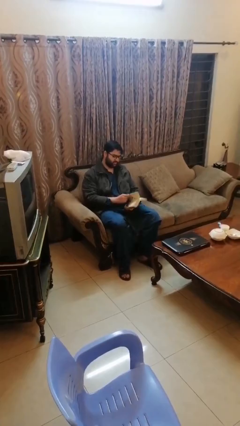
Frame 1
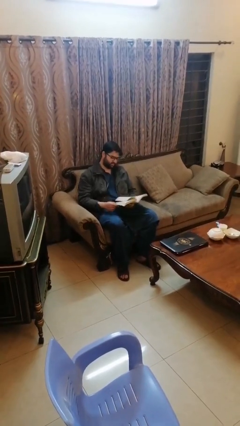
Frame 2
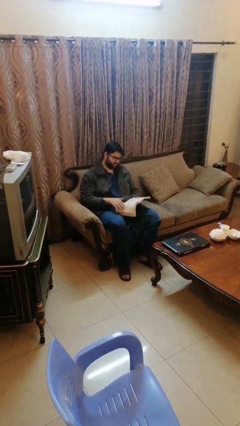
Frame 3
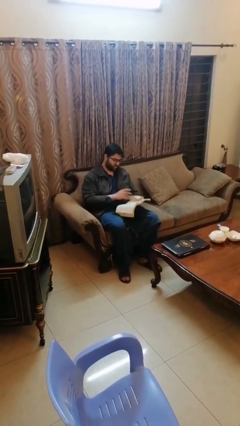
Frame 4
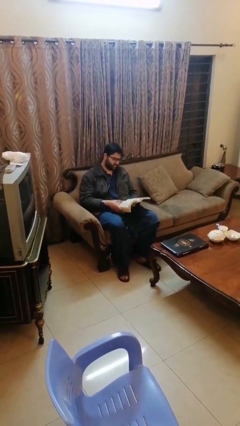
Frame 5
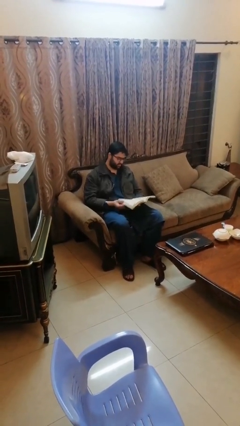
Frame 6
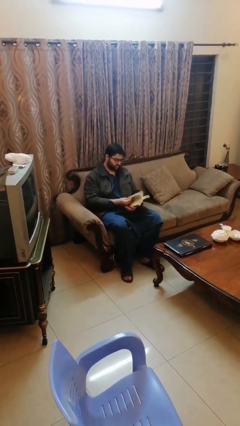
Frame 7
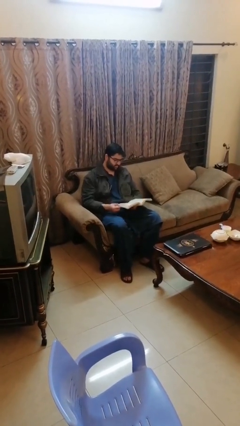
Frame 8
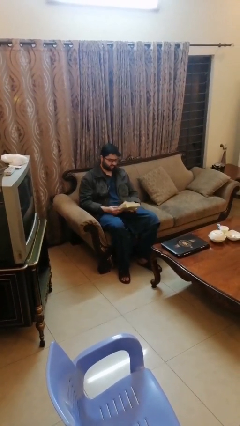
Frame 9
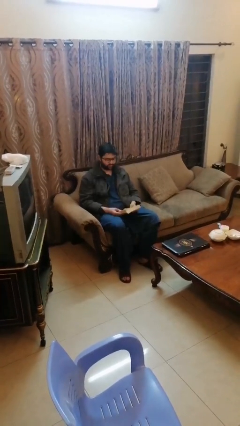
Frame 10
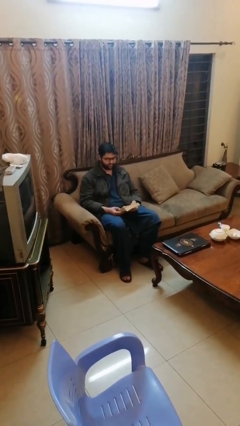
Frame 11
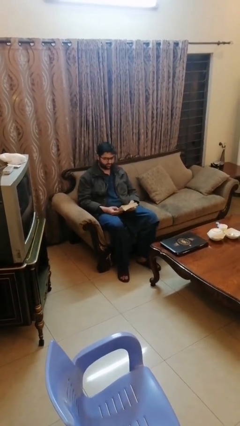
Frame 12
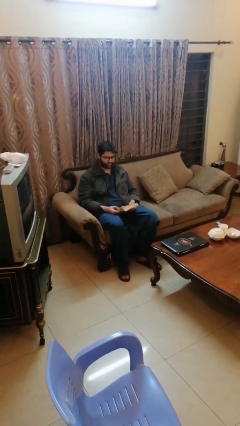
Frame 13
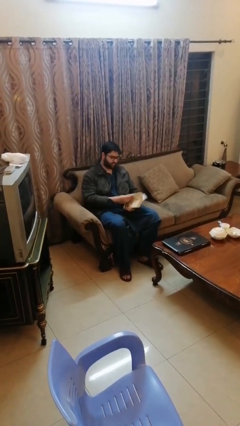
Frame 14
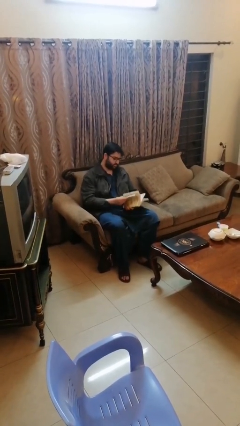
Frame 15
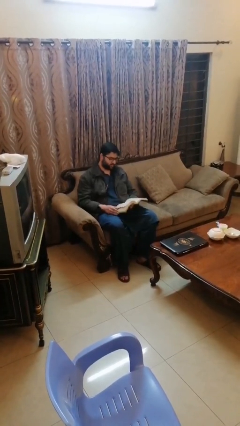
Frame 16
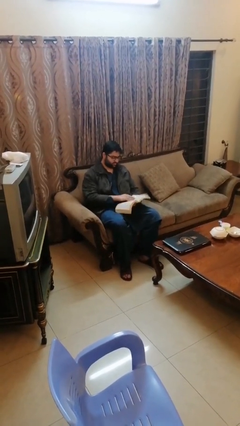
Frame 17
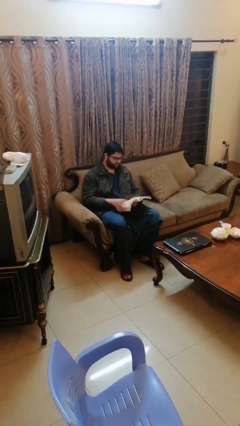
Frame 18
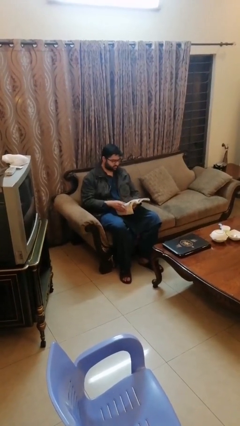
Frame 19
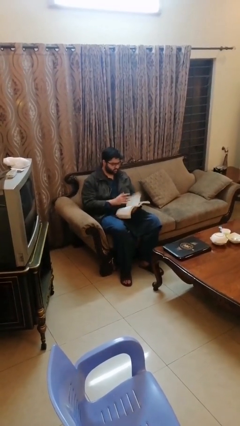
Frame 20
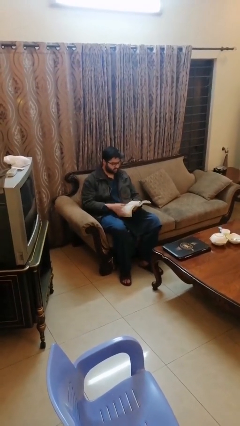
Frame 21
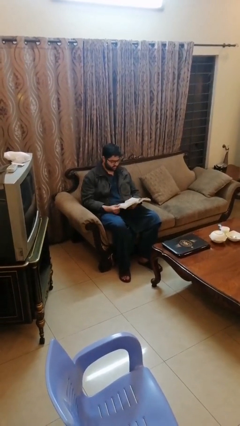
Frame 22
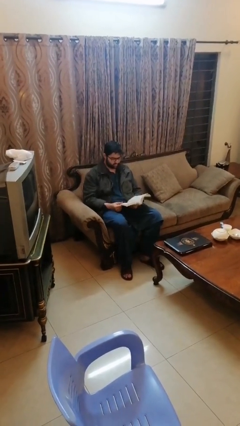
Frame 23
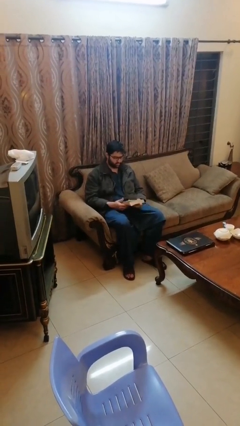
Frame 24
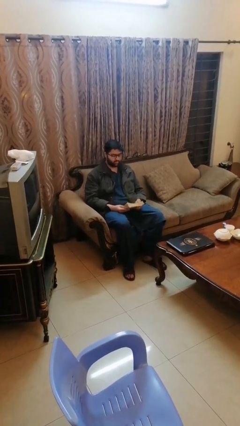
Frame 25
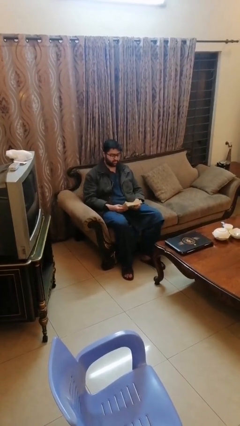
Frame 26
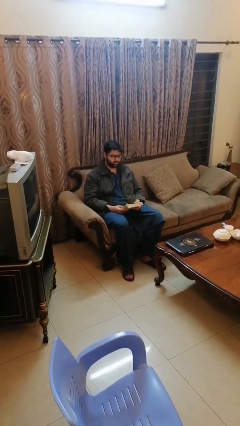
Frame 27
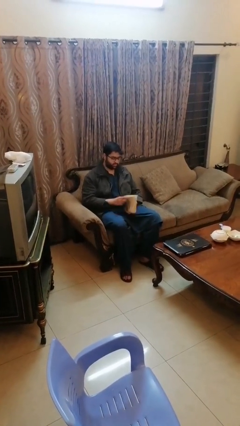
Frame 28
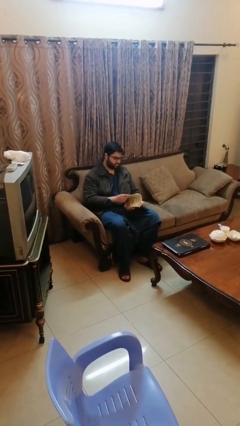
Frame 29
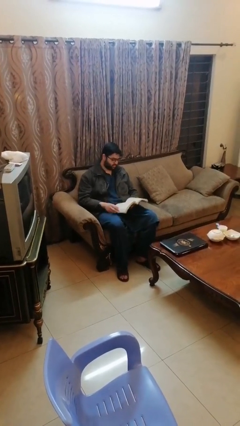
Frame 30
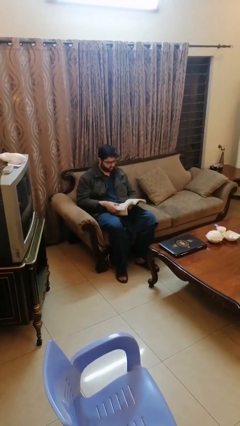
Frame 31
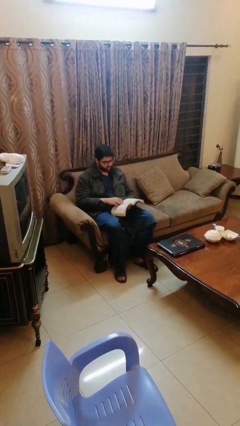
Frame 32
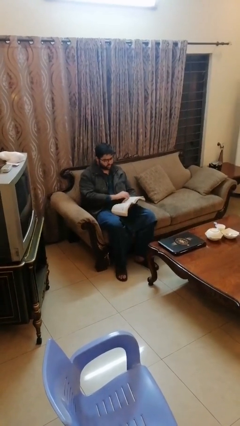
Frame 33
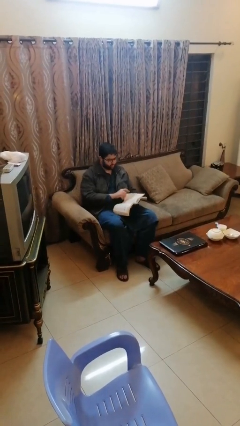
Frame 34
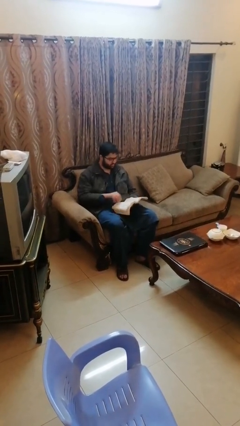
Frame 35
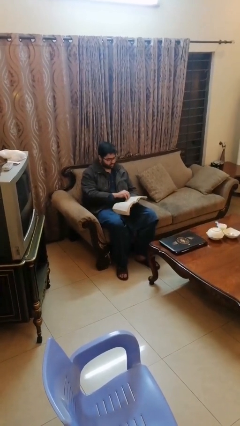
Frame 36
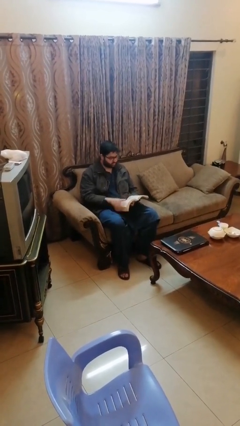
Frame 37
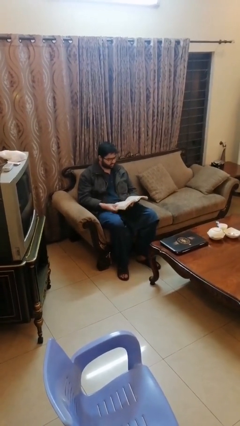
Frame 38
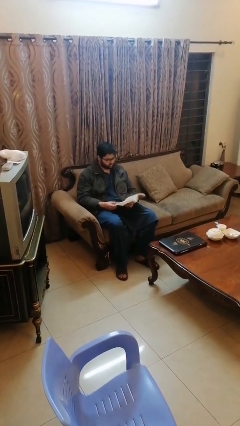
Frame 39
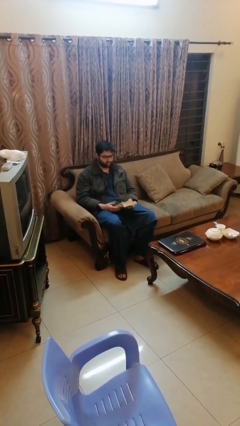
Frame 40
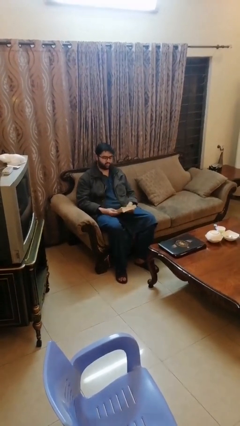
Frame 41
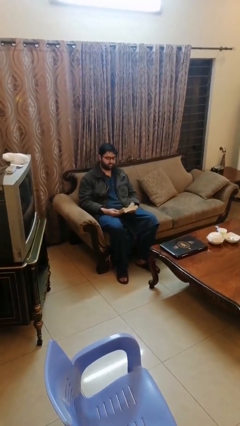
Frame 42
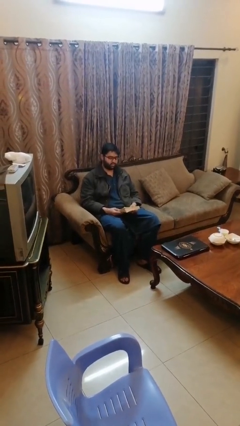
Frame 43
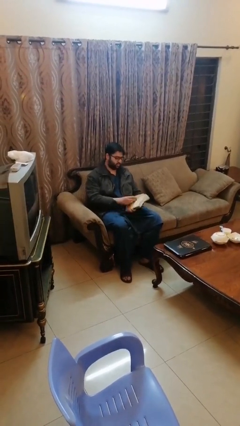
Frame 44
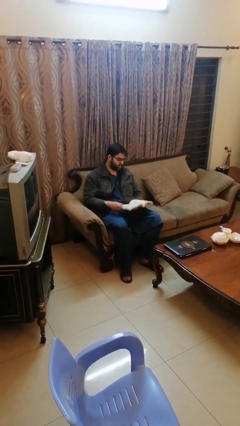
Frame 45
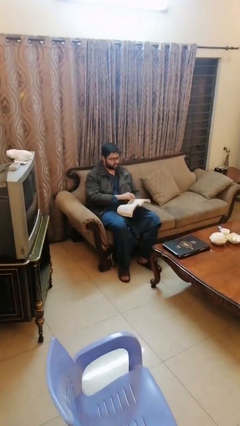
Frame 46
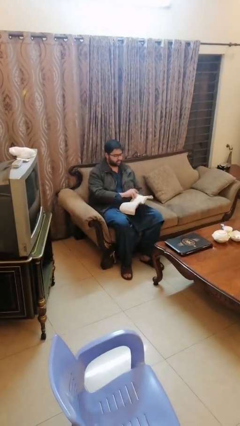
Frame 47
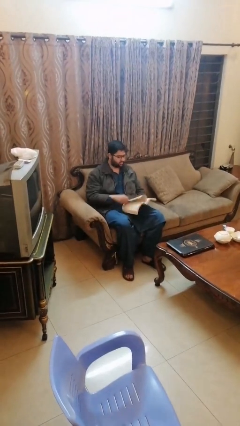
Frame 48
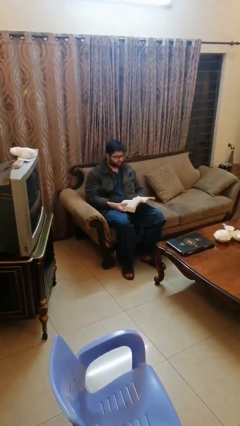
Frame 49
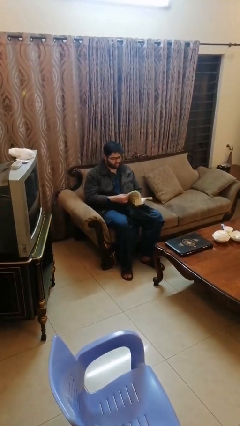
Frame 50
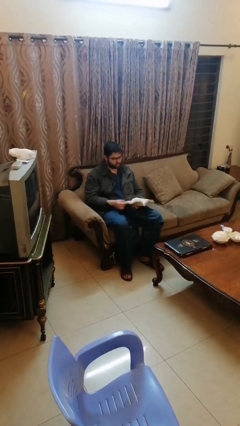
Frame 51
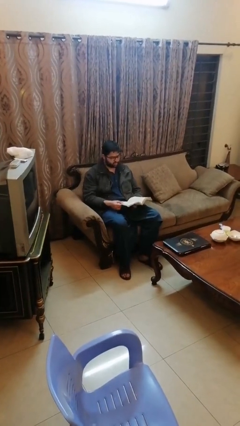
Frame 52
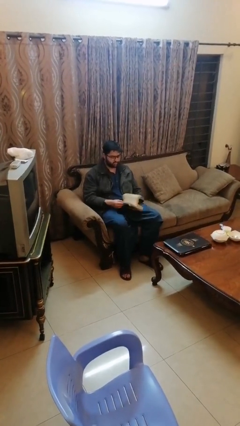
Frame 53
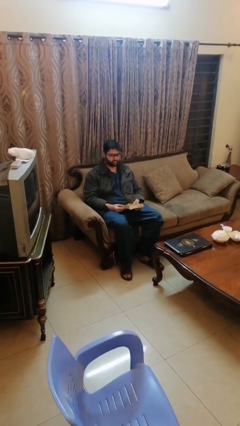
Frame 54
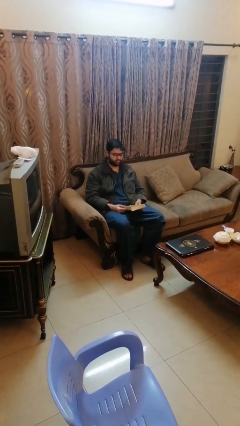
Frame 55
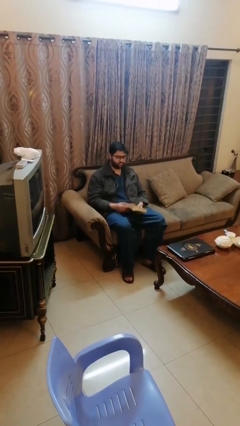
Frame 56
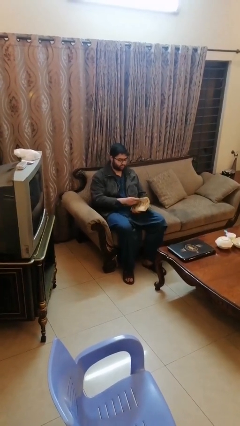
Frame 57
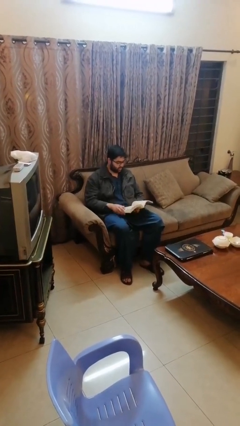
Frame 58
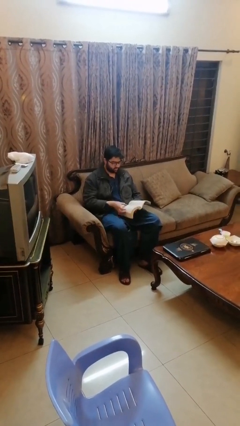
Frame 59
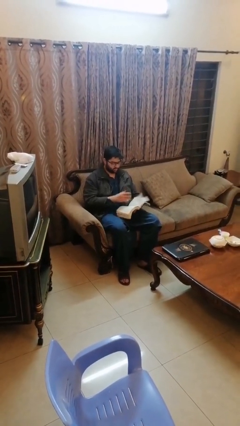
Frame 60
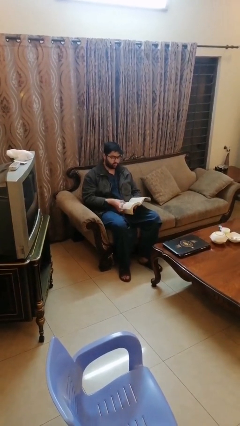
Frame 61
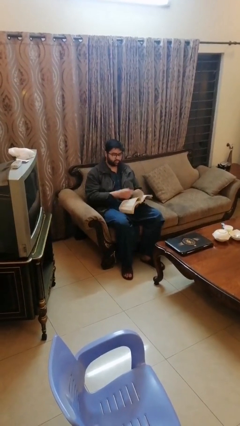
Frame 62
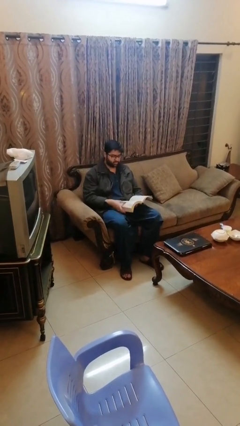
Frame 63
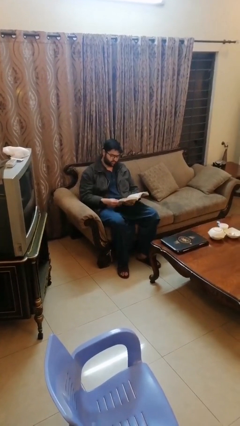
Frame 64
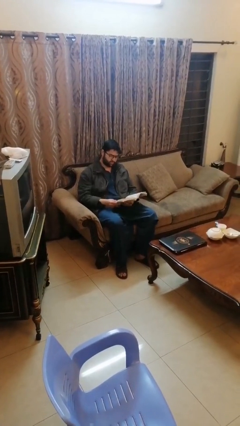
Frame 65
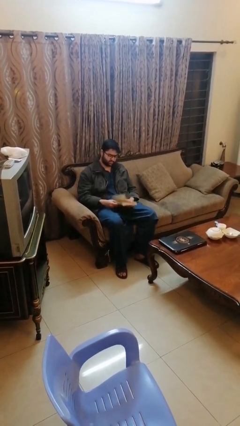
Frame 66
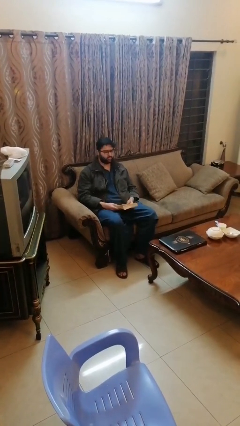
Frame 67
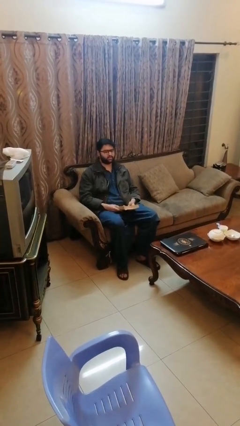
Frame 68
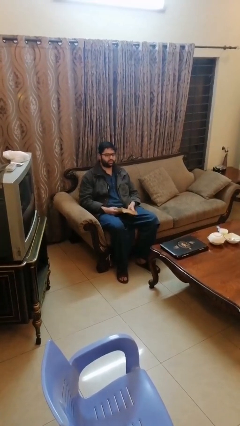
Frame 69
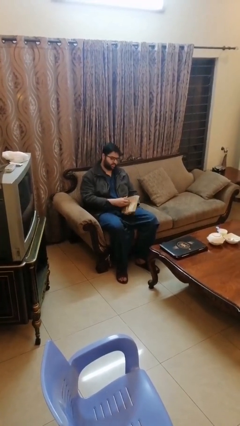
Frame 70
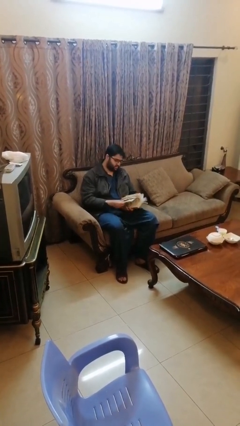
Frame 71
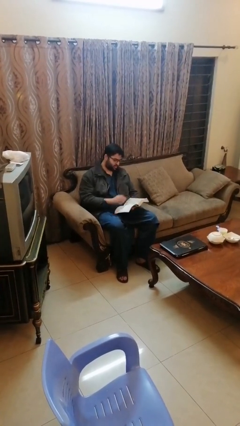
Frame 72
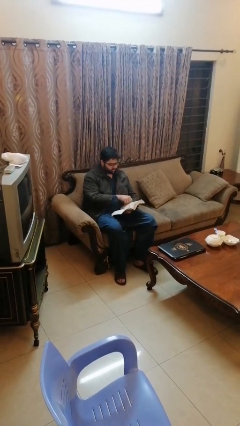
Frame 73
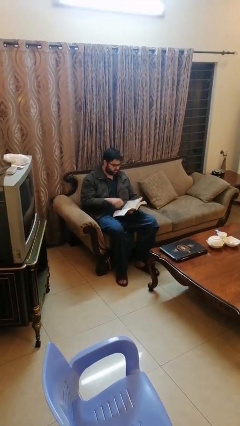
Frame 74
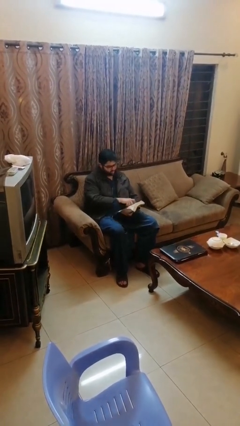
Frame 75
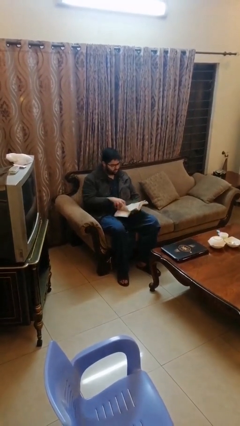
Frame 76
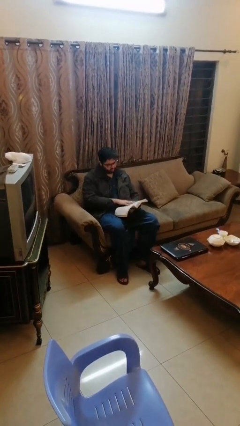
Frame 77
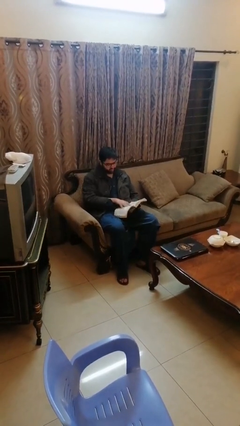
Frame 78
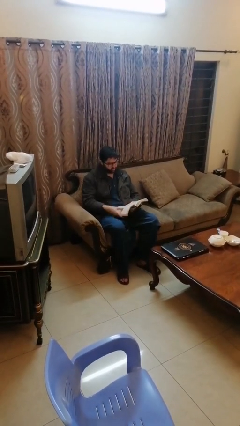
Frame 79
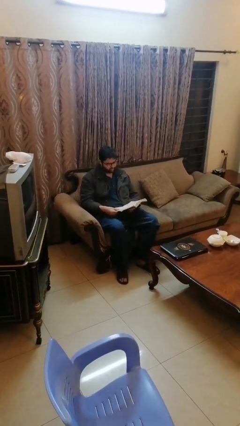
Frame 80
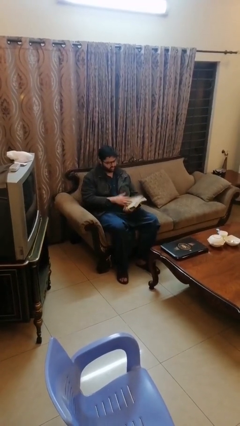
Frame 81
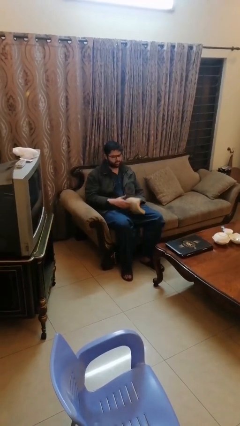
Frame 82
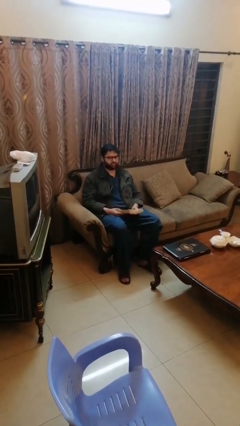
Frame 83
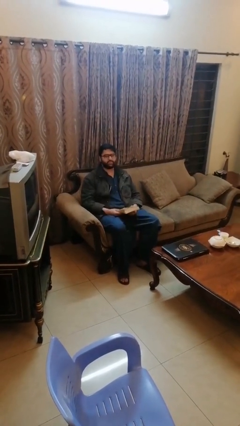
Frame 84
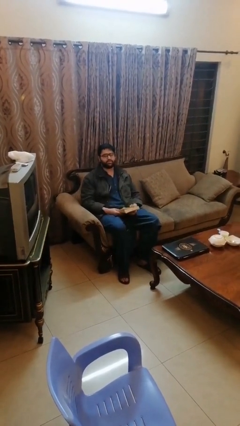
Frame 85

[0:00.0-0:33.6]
person reads document

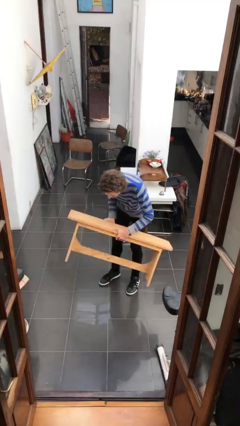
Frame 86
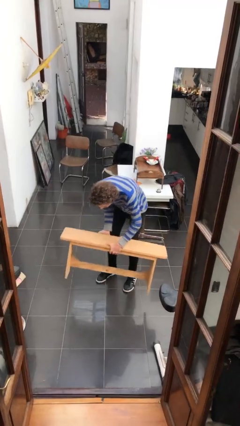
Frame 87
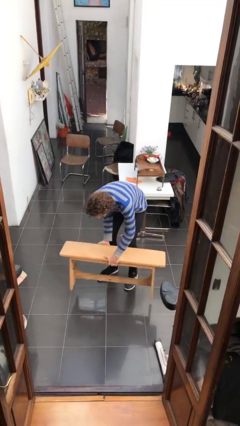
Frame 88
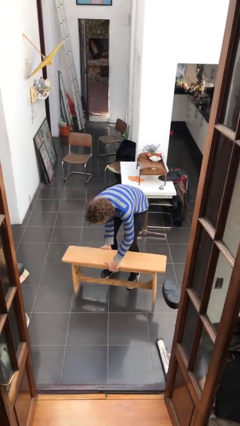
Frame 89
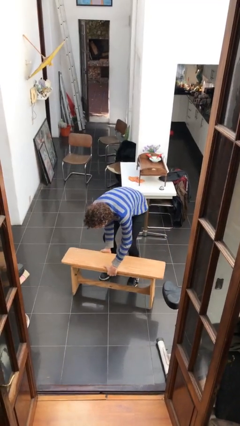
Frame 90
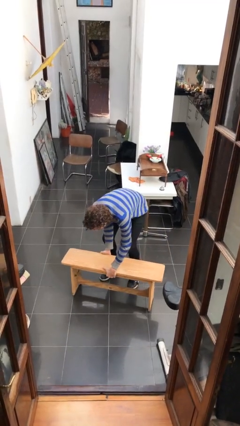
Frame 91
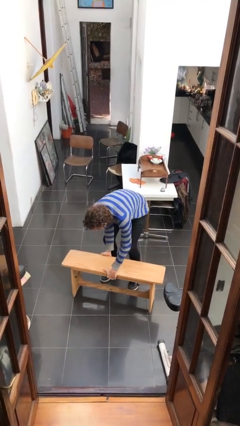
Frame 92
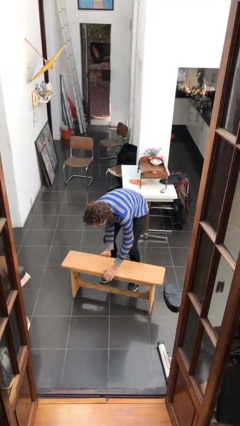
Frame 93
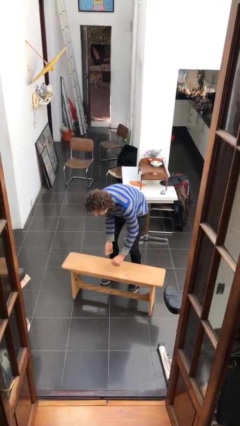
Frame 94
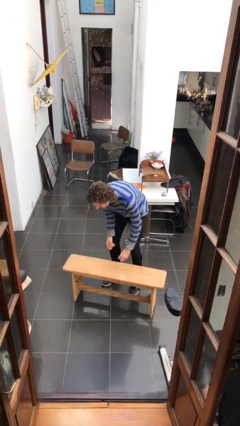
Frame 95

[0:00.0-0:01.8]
person puts down object on floor
